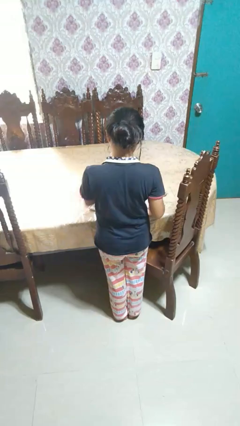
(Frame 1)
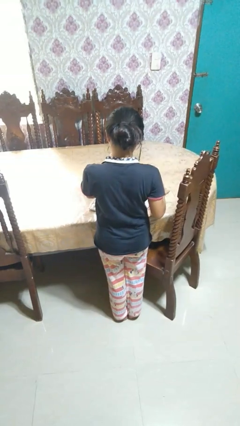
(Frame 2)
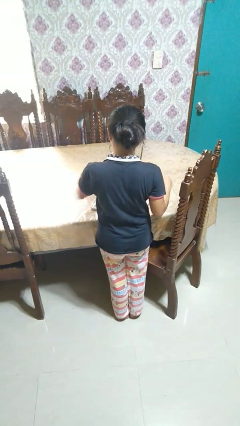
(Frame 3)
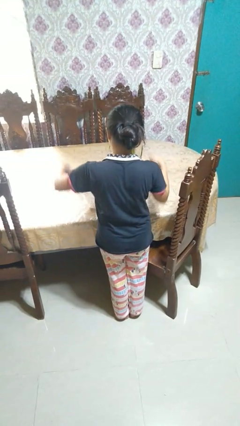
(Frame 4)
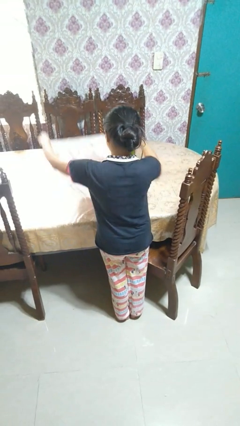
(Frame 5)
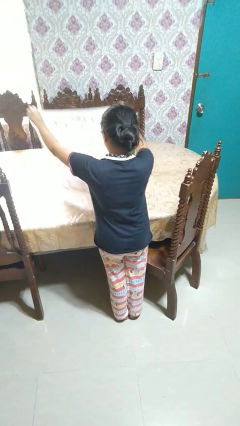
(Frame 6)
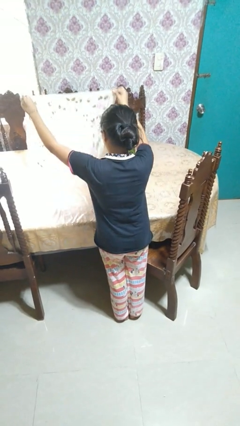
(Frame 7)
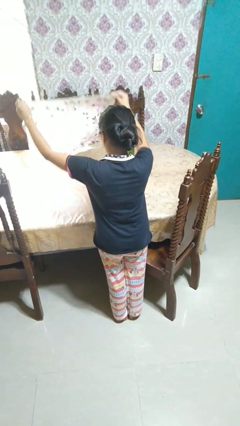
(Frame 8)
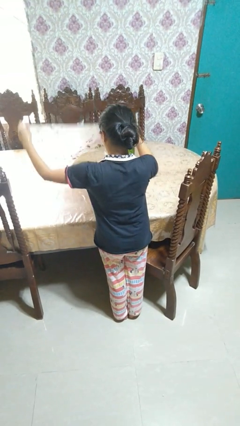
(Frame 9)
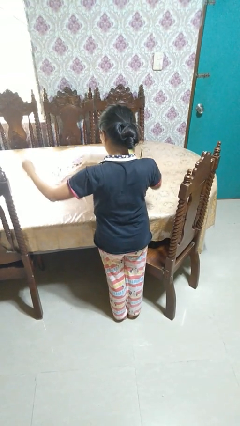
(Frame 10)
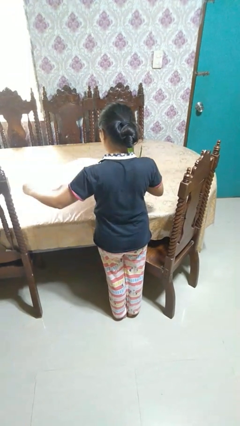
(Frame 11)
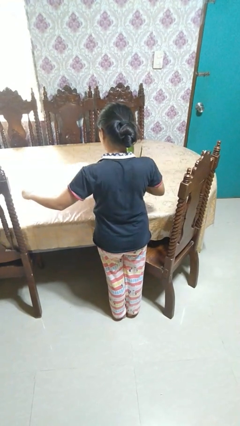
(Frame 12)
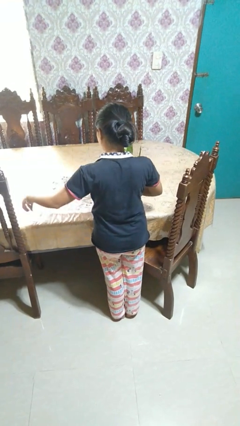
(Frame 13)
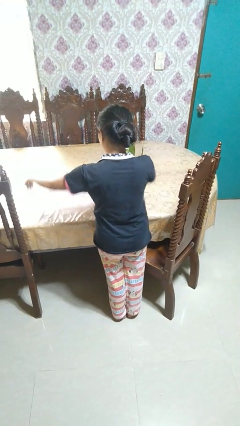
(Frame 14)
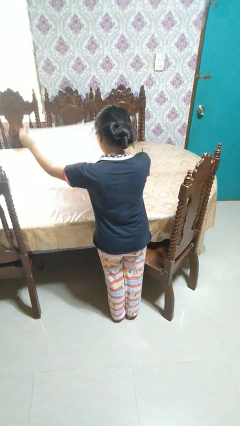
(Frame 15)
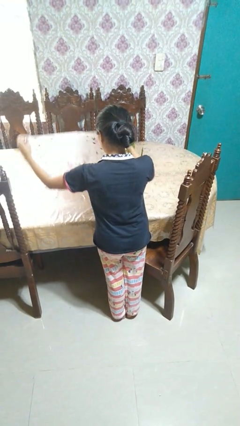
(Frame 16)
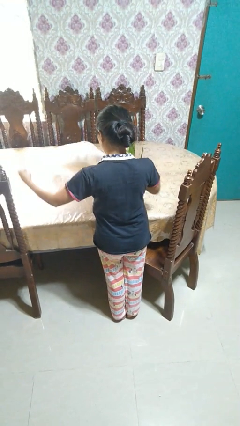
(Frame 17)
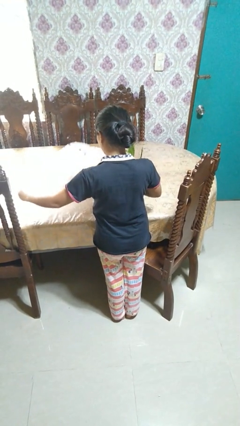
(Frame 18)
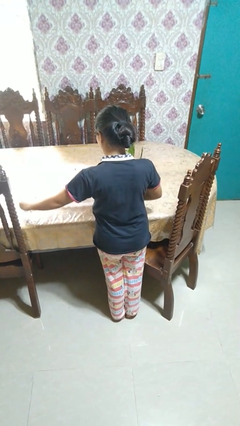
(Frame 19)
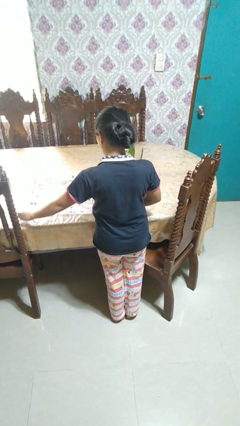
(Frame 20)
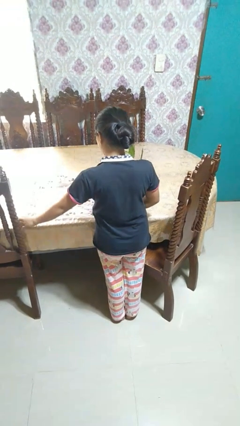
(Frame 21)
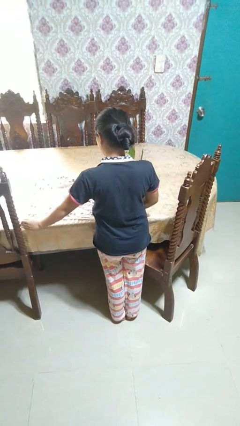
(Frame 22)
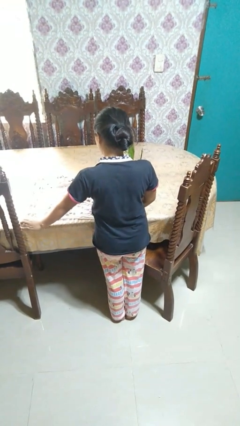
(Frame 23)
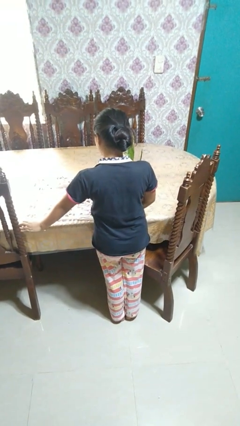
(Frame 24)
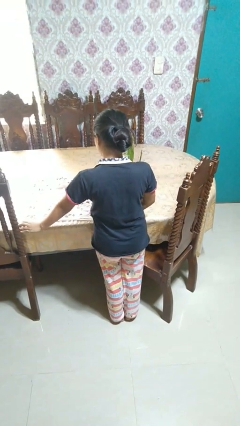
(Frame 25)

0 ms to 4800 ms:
person spreads tablecloth

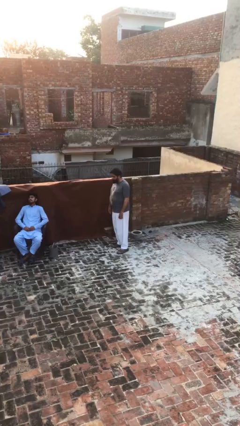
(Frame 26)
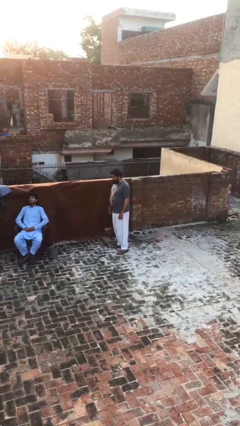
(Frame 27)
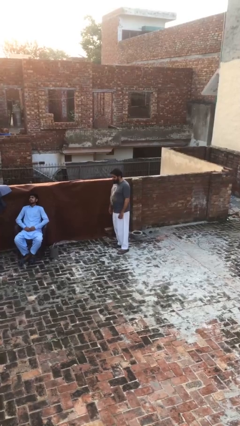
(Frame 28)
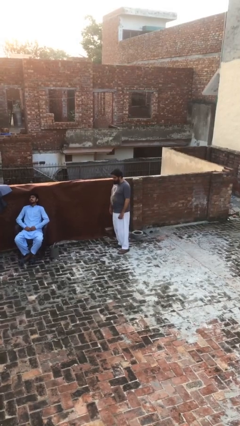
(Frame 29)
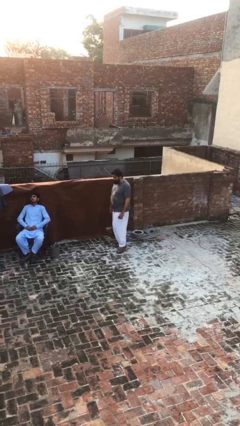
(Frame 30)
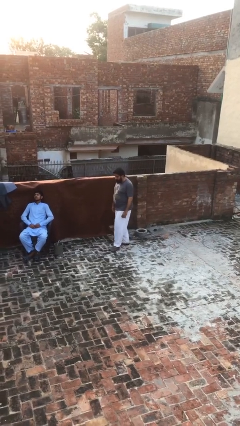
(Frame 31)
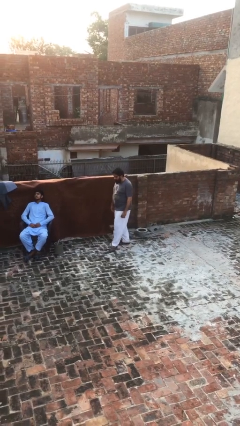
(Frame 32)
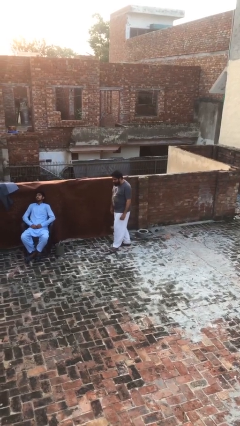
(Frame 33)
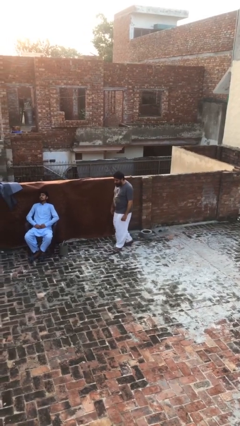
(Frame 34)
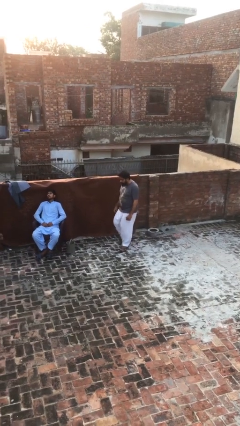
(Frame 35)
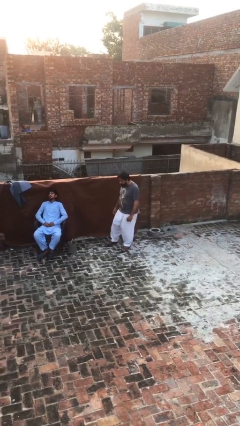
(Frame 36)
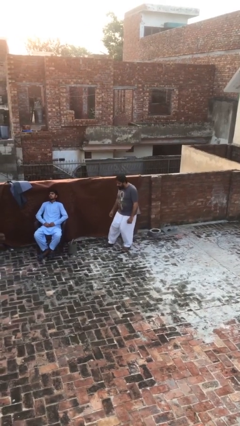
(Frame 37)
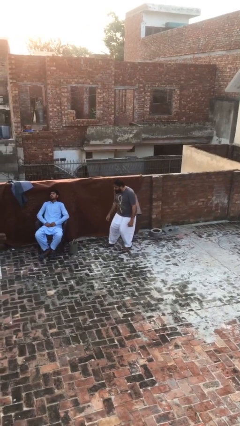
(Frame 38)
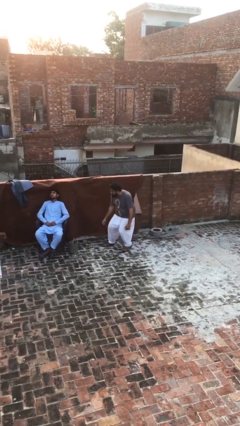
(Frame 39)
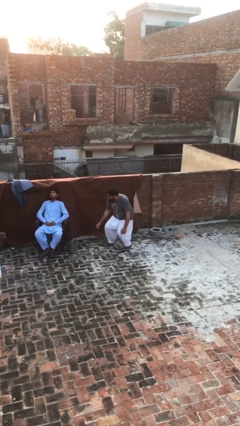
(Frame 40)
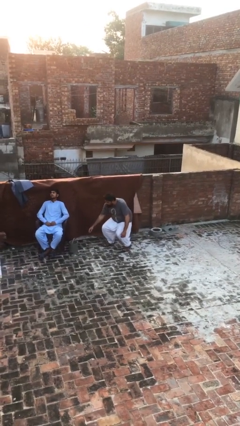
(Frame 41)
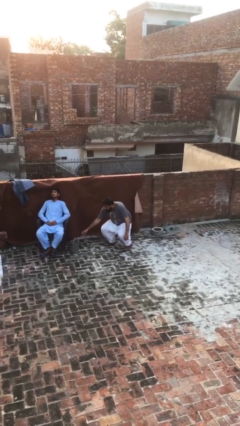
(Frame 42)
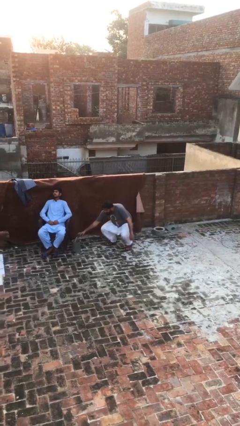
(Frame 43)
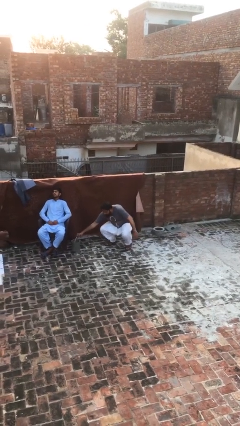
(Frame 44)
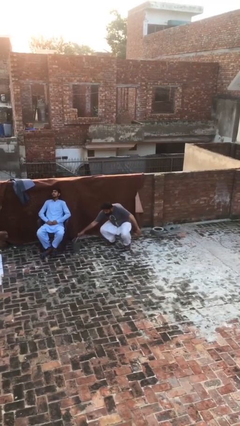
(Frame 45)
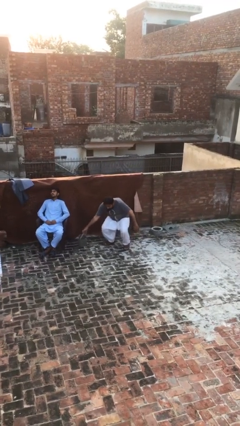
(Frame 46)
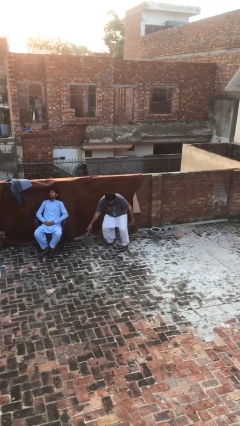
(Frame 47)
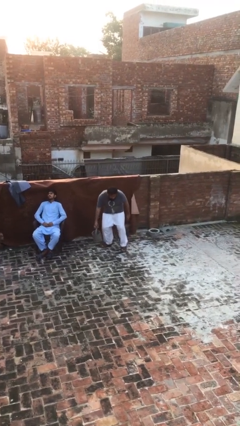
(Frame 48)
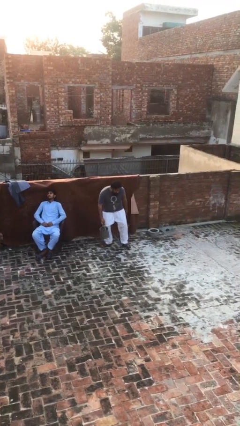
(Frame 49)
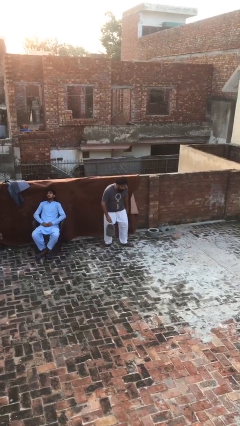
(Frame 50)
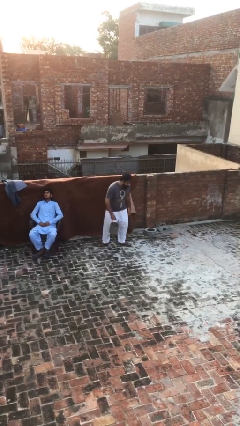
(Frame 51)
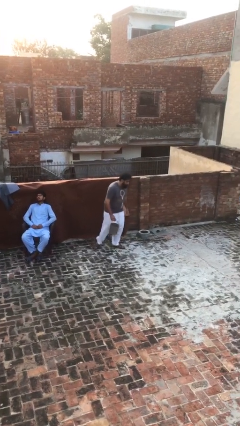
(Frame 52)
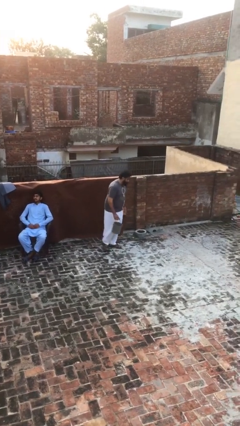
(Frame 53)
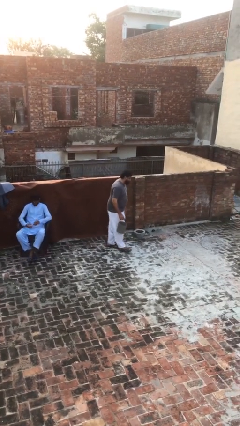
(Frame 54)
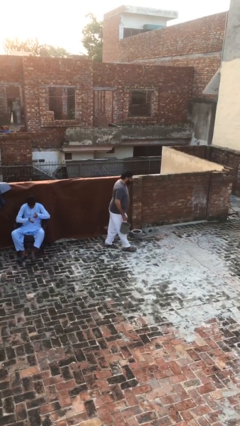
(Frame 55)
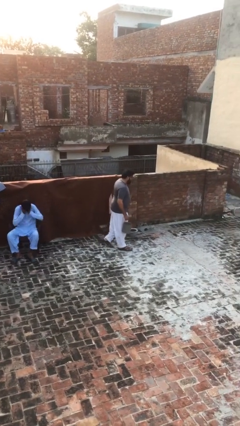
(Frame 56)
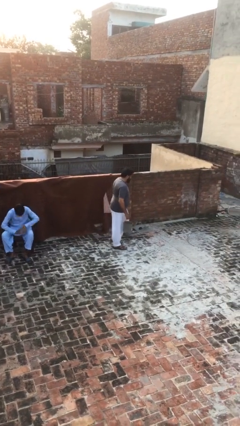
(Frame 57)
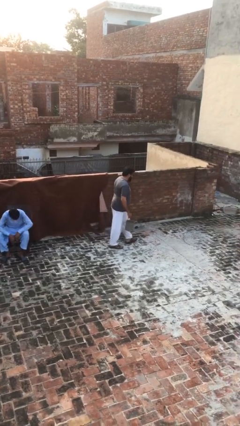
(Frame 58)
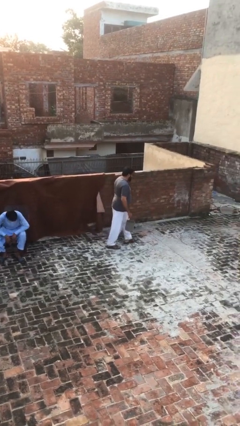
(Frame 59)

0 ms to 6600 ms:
person steals object from person

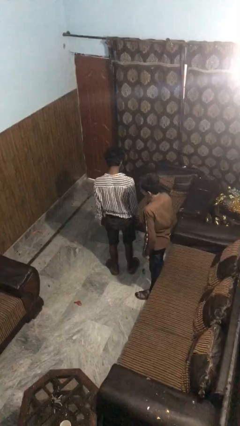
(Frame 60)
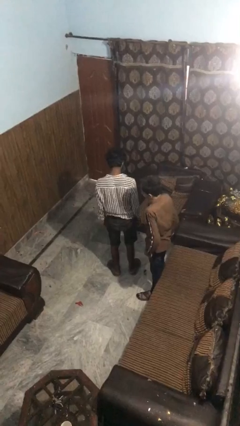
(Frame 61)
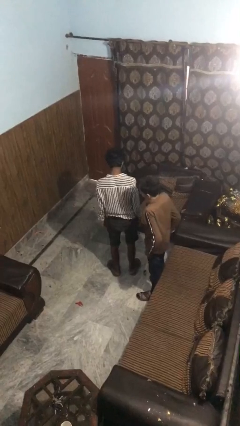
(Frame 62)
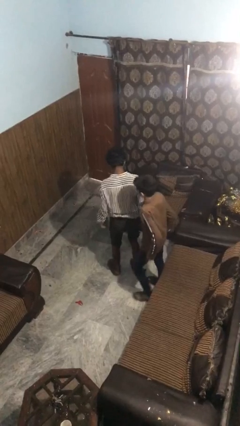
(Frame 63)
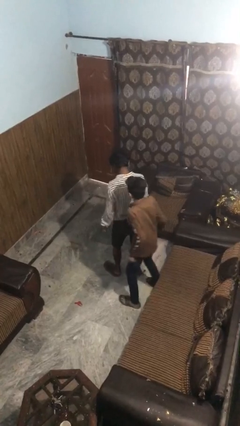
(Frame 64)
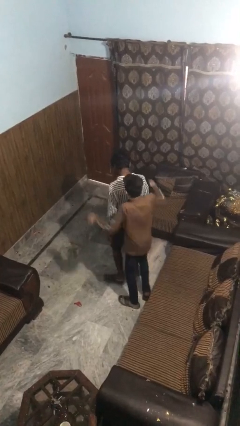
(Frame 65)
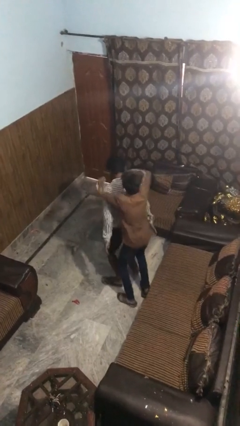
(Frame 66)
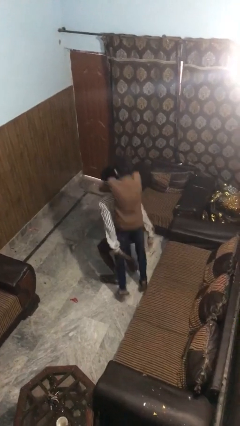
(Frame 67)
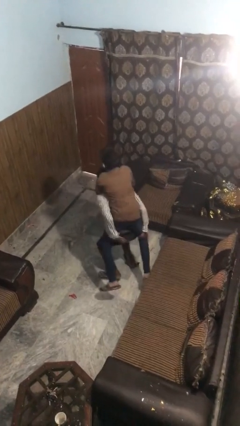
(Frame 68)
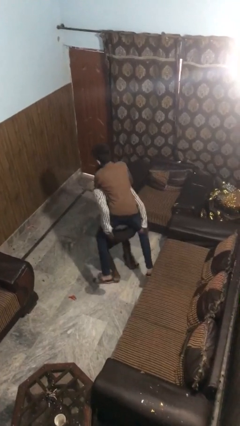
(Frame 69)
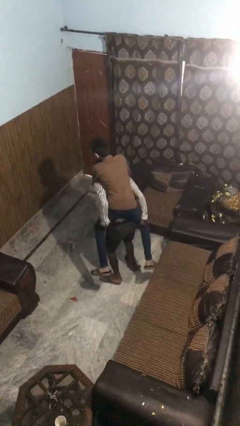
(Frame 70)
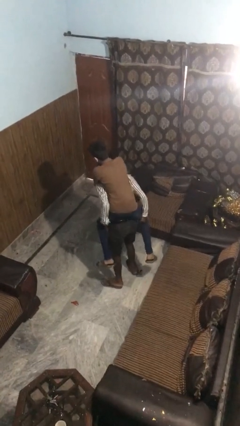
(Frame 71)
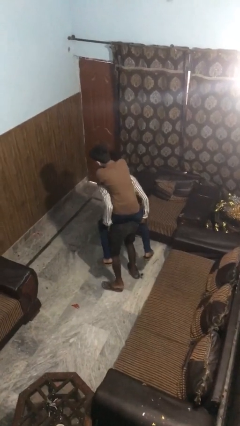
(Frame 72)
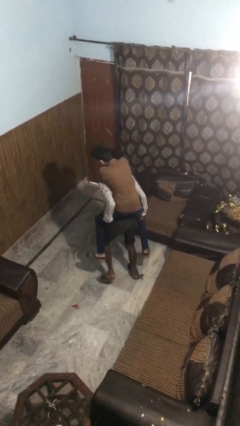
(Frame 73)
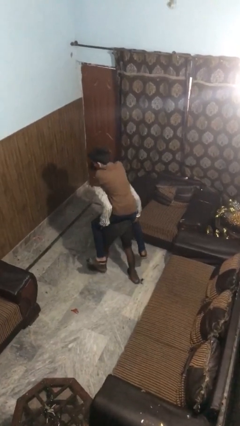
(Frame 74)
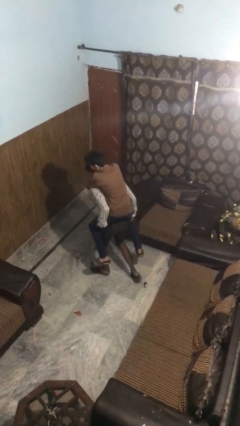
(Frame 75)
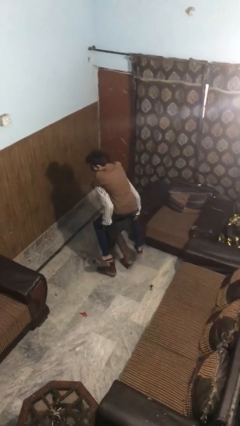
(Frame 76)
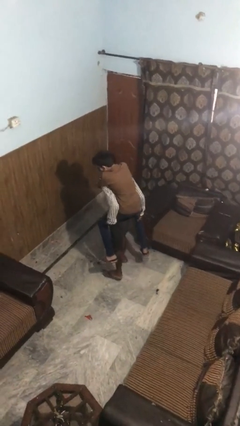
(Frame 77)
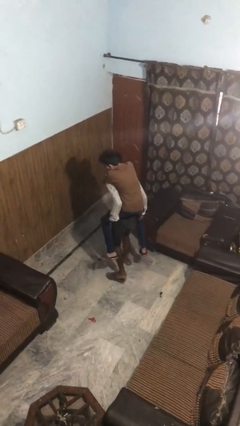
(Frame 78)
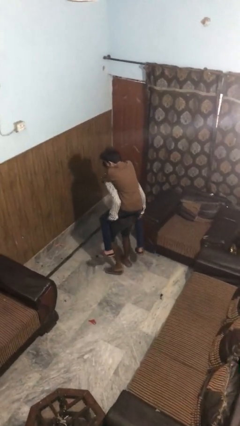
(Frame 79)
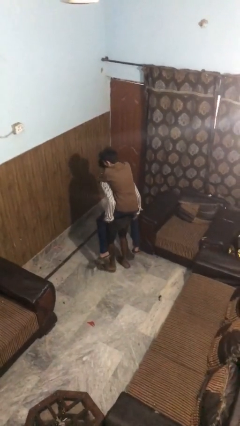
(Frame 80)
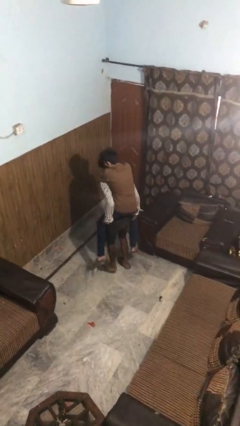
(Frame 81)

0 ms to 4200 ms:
person carries person on back

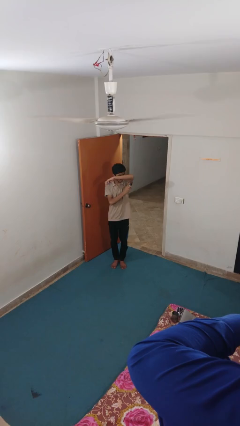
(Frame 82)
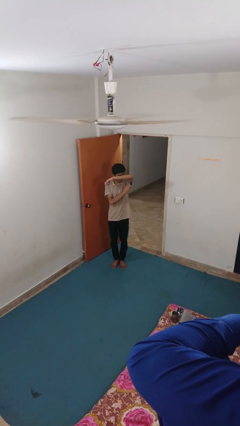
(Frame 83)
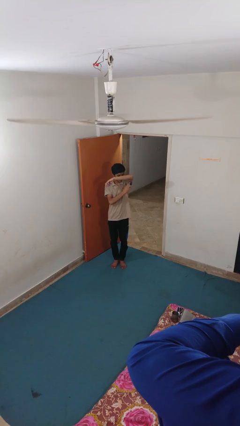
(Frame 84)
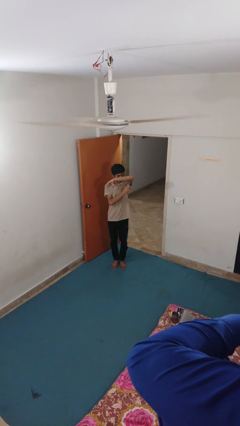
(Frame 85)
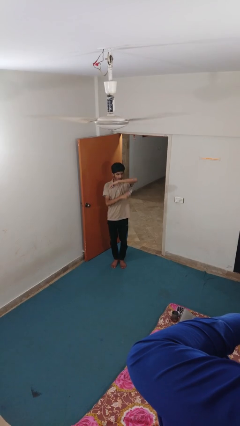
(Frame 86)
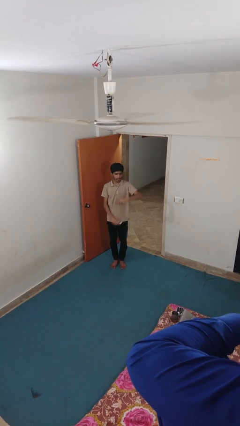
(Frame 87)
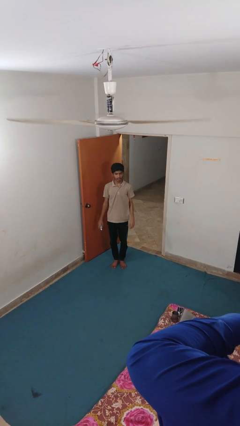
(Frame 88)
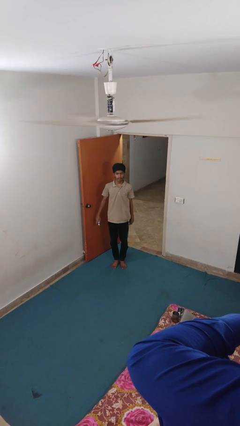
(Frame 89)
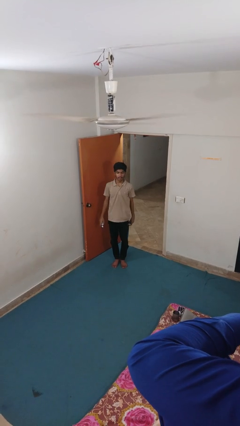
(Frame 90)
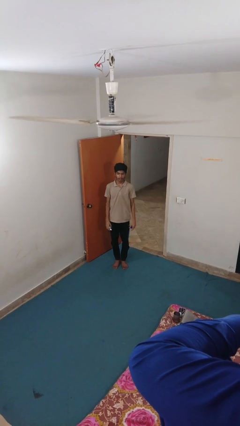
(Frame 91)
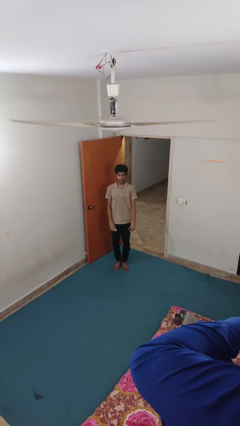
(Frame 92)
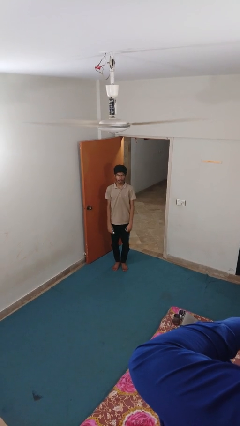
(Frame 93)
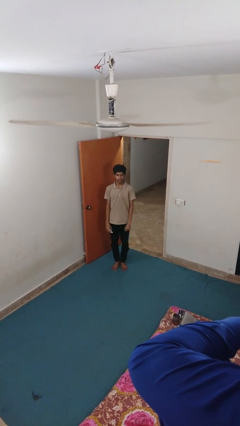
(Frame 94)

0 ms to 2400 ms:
person applies deodorant
